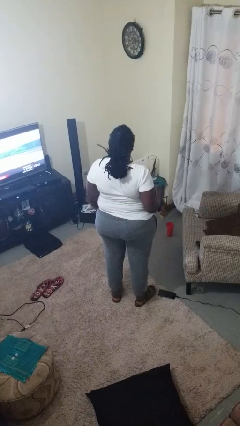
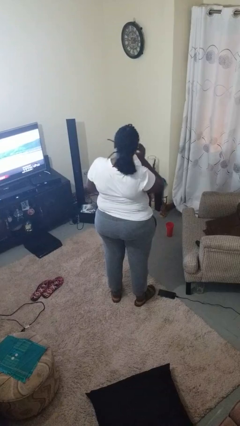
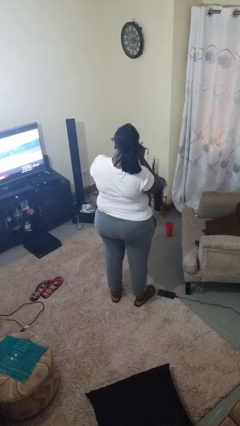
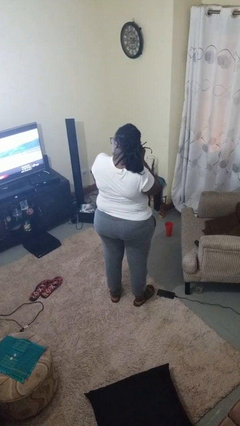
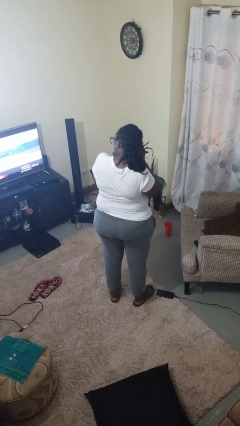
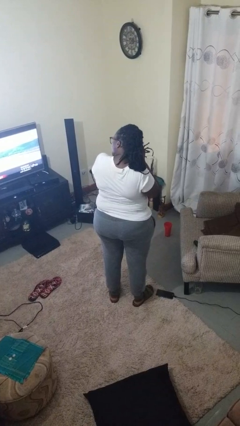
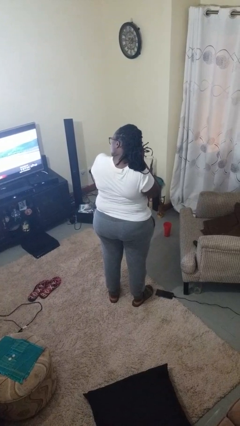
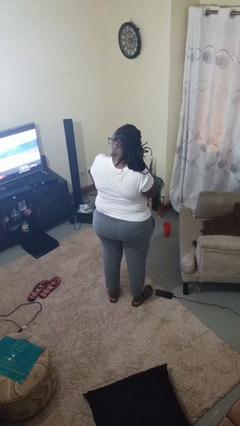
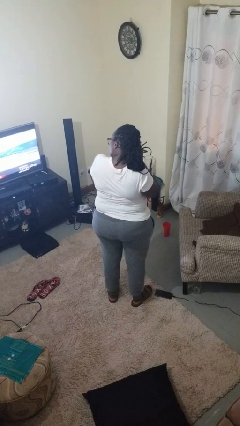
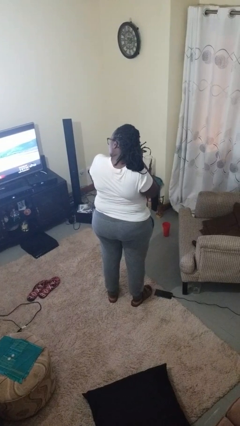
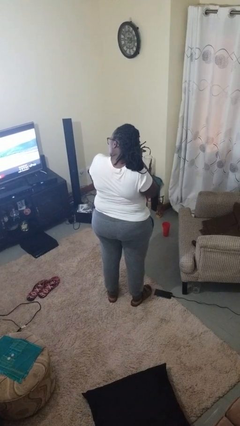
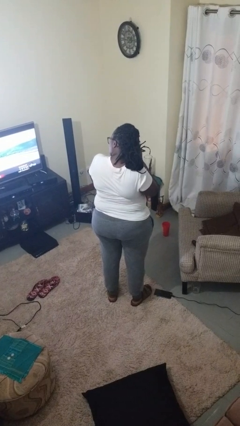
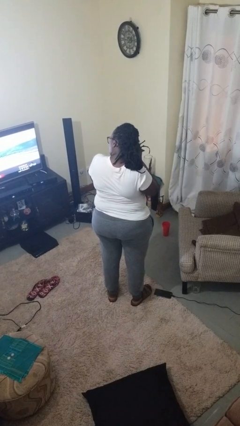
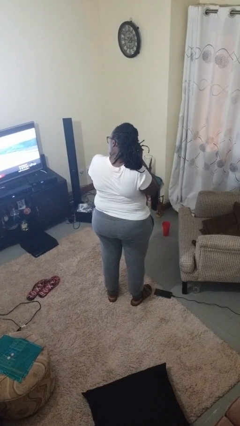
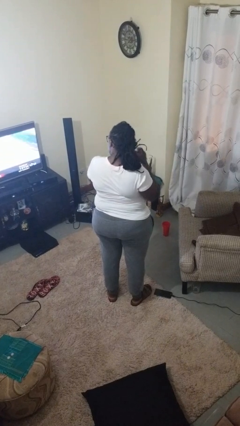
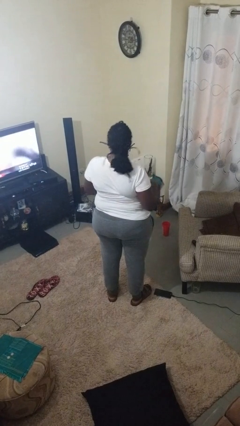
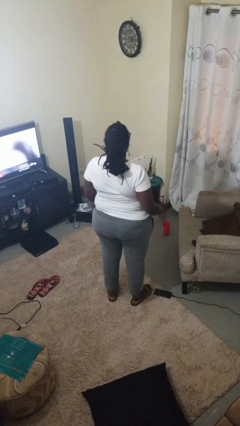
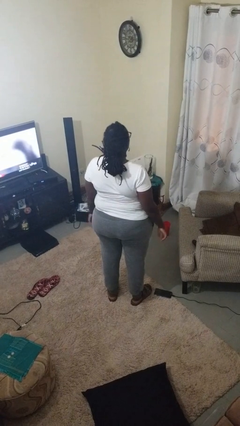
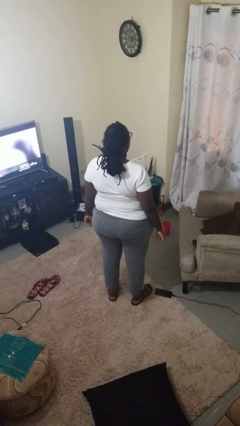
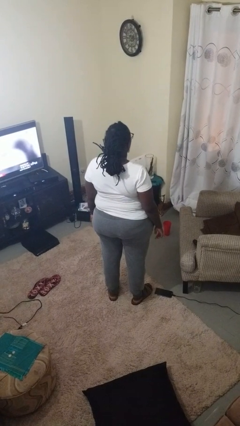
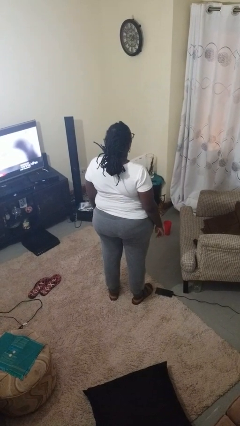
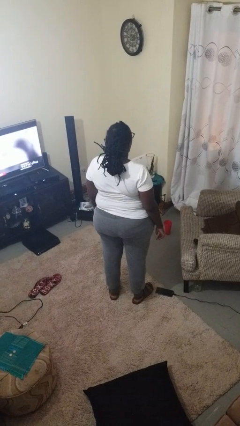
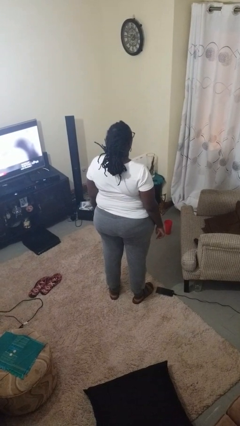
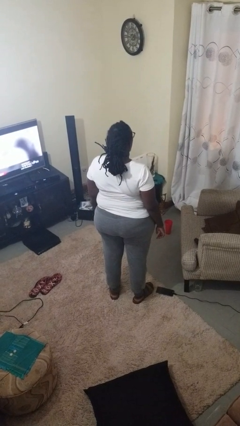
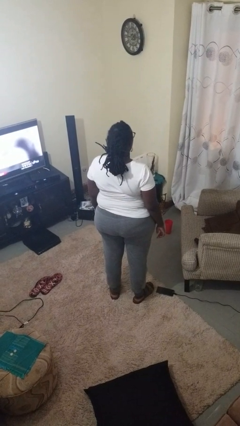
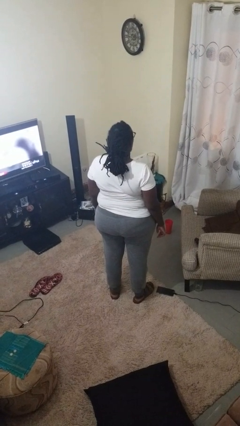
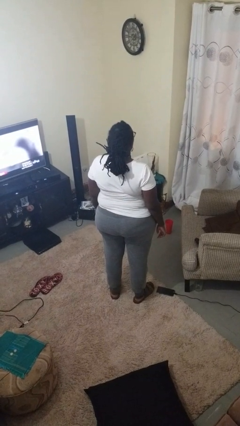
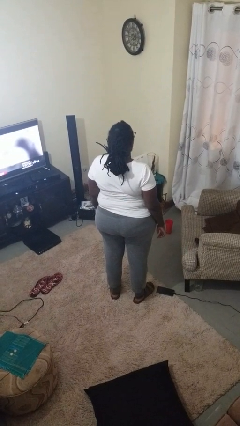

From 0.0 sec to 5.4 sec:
person puts on earrings

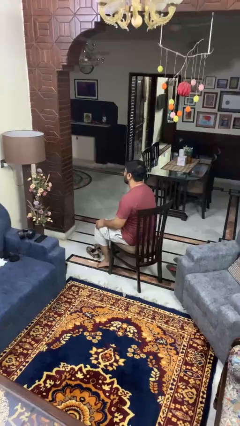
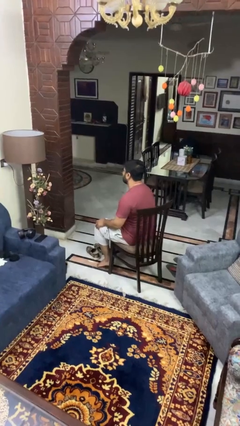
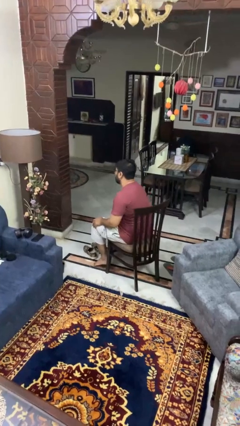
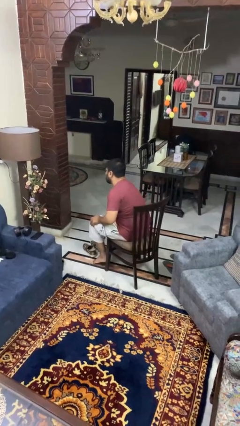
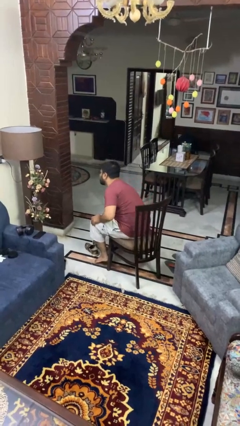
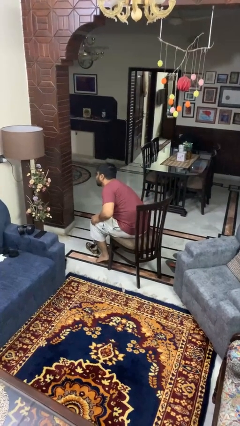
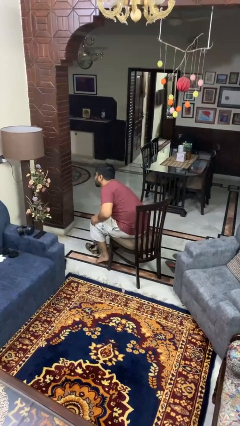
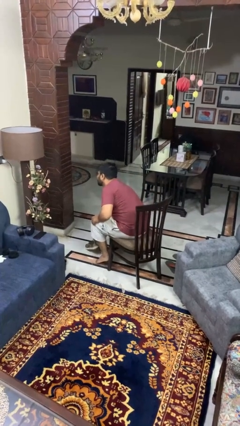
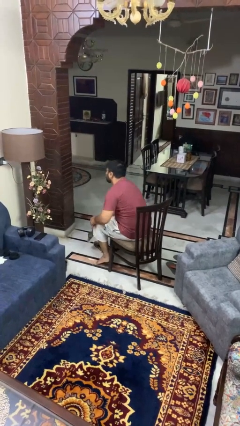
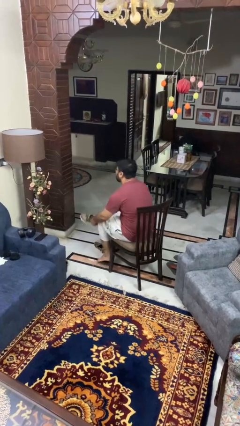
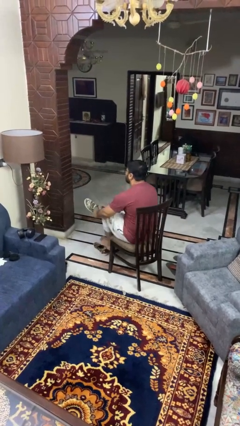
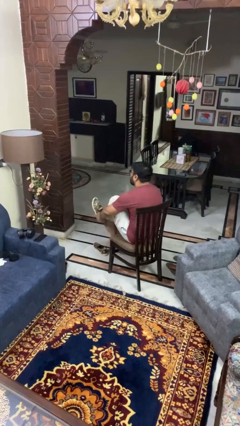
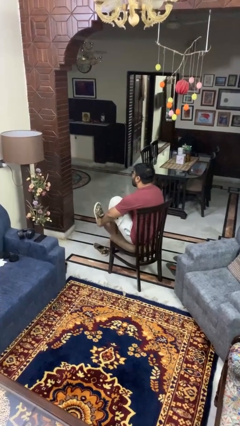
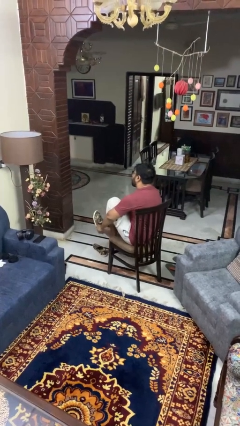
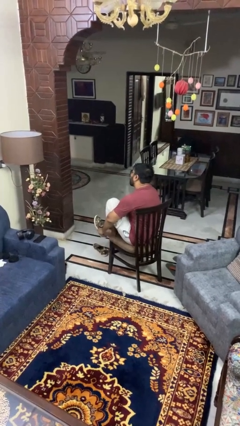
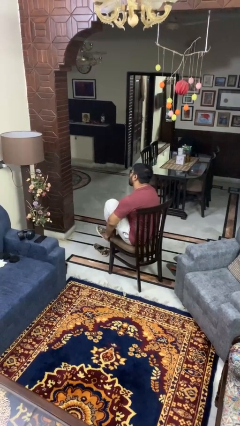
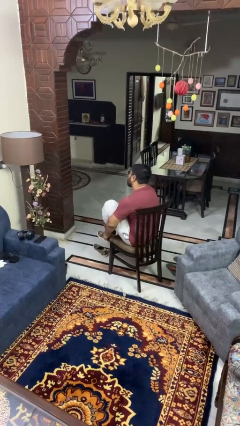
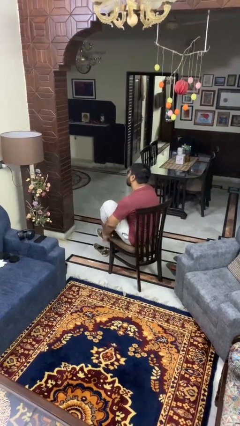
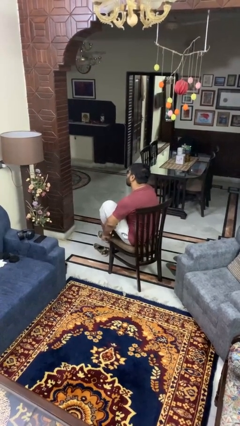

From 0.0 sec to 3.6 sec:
person puts on shoes

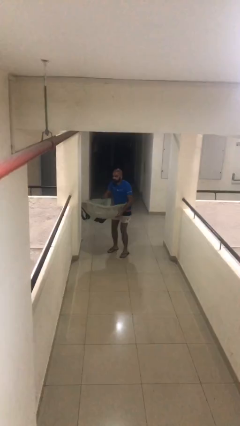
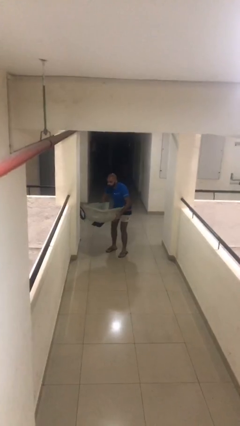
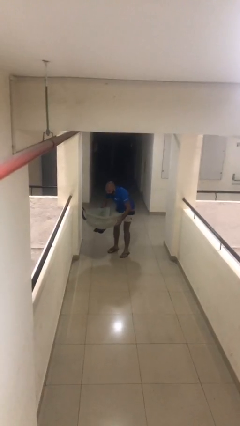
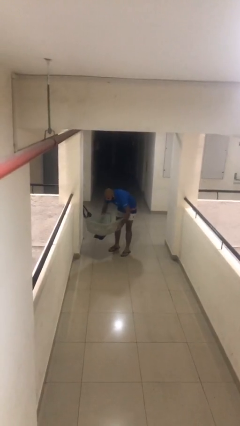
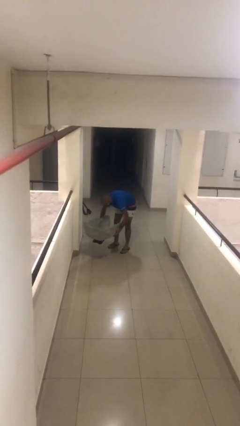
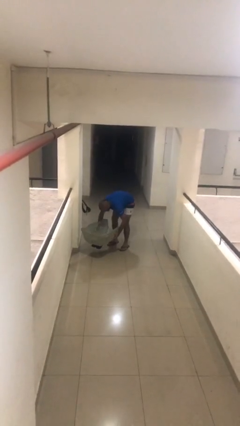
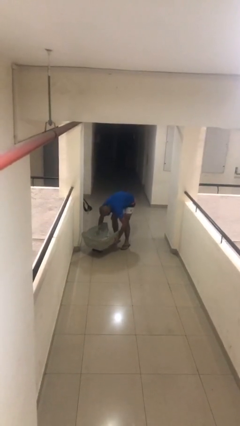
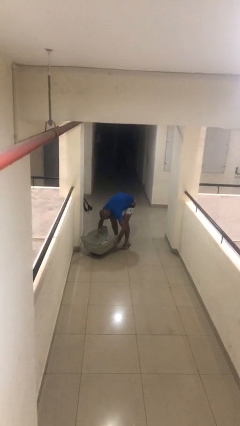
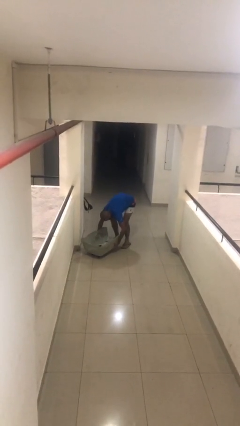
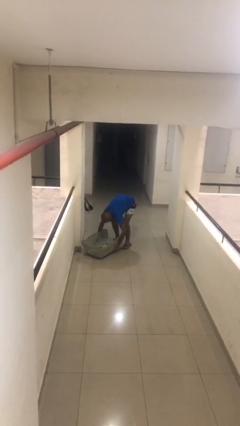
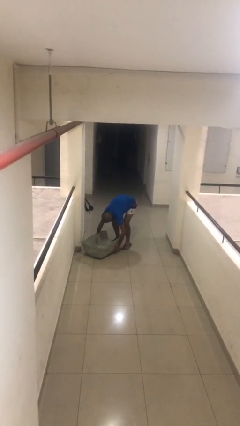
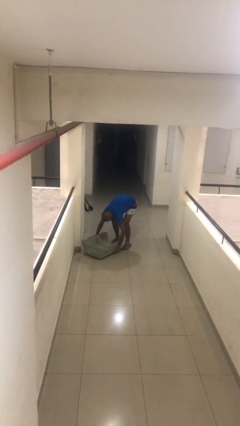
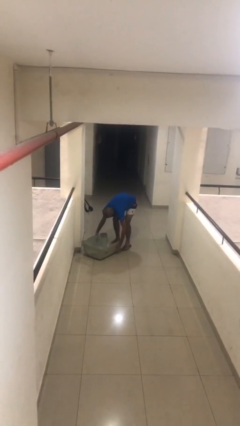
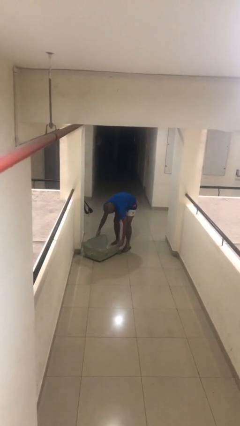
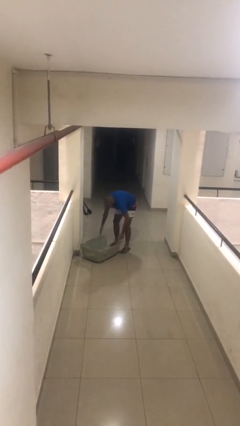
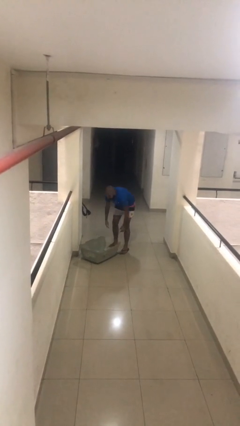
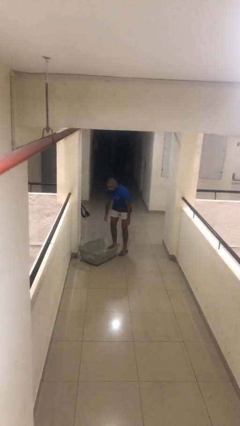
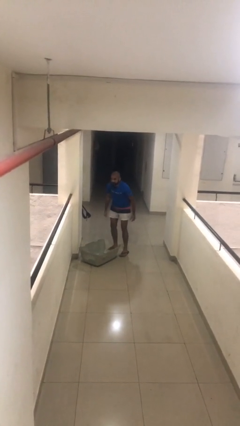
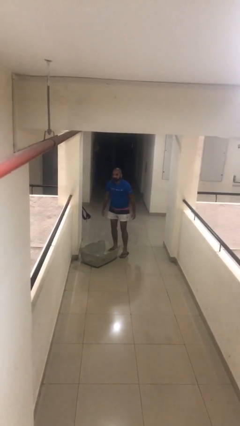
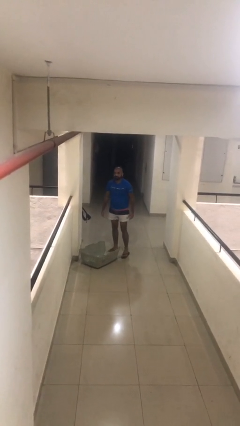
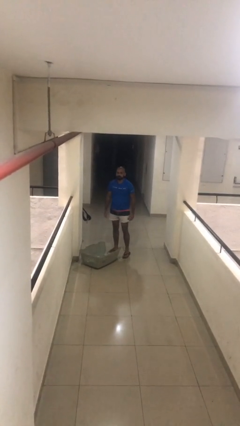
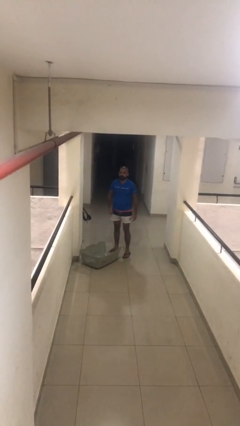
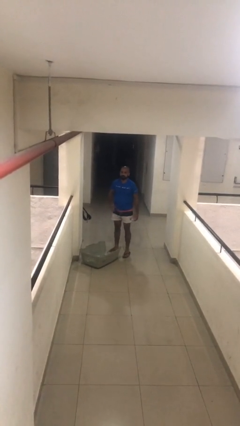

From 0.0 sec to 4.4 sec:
person puts down object on floor

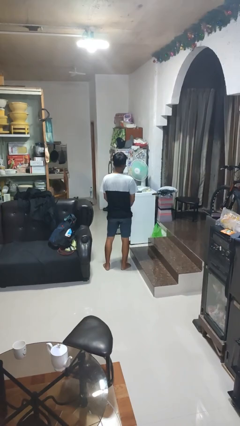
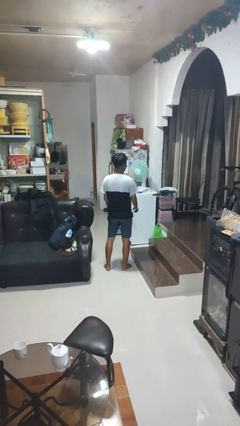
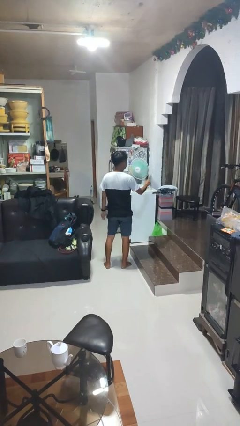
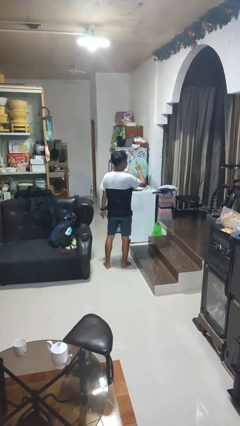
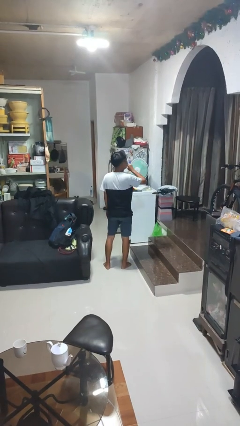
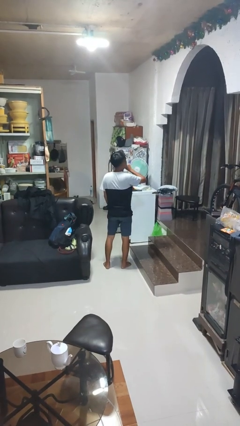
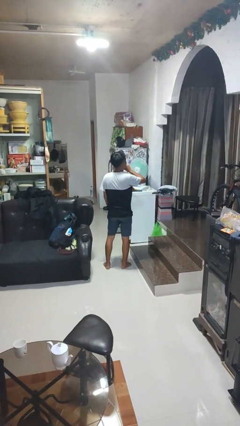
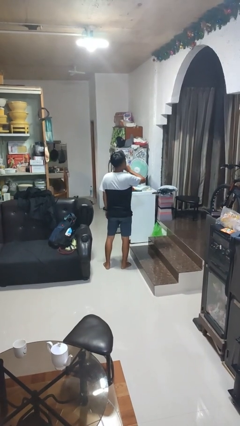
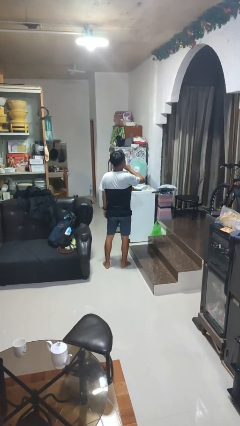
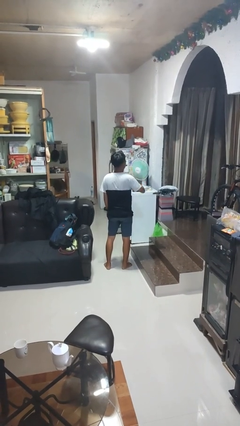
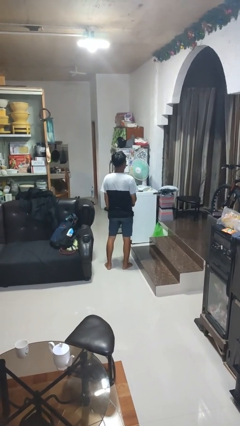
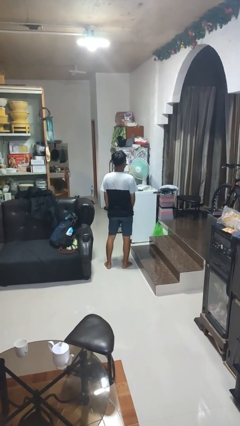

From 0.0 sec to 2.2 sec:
person gestures be quiet

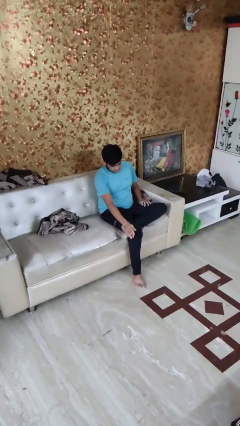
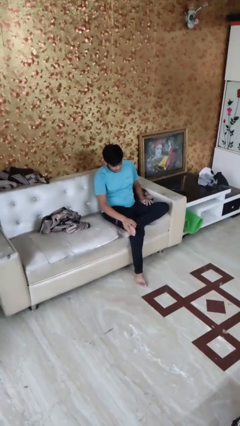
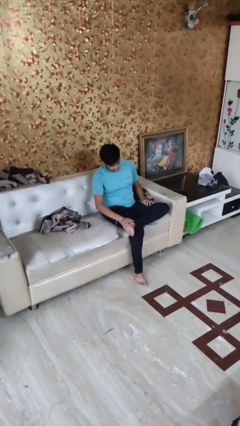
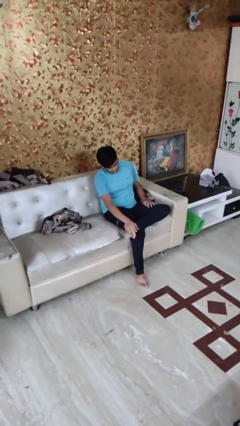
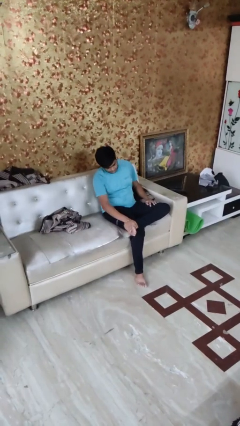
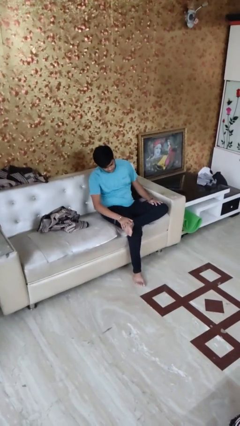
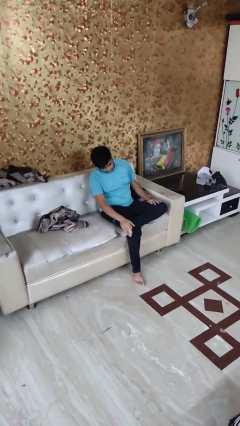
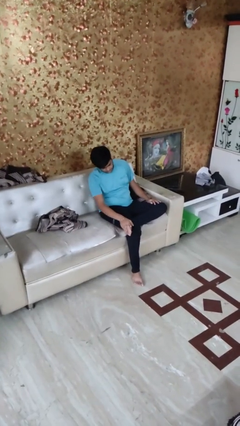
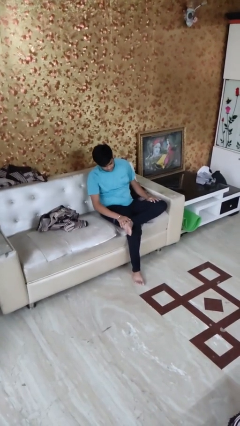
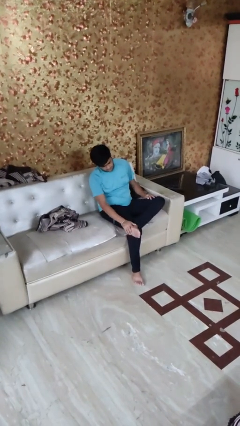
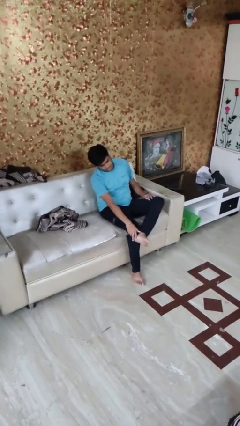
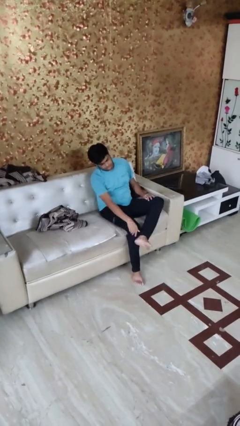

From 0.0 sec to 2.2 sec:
person rubs foot
